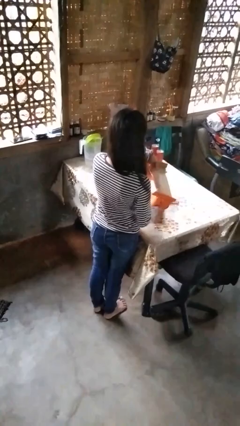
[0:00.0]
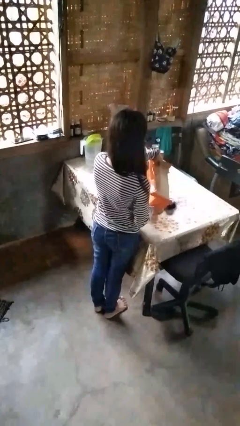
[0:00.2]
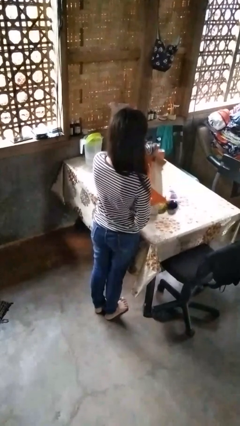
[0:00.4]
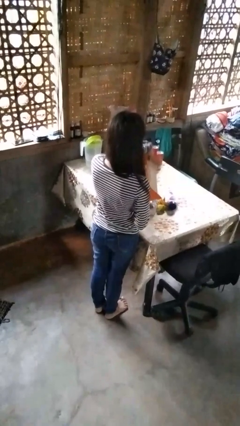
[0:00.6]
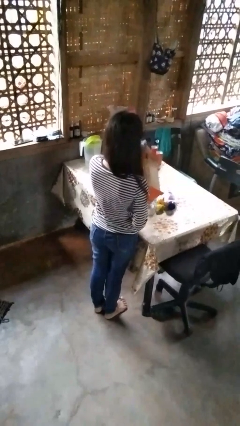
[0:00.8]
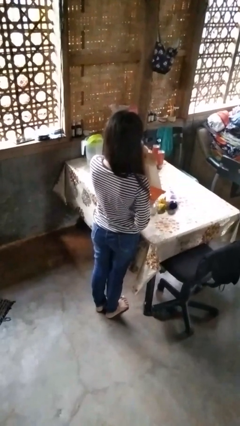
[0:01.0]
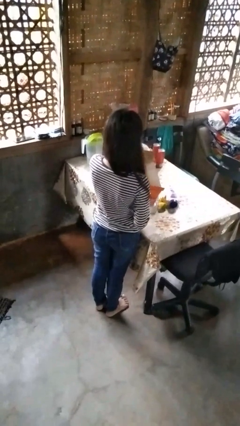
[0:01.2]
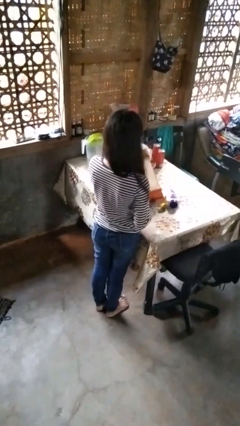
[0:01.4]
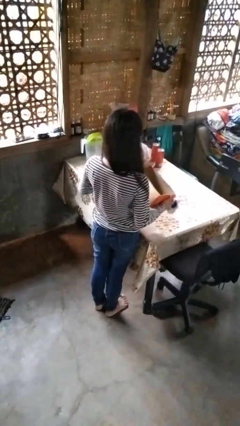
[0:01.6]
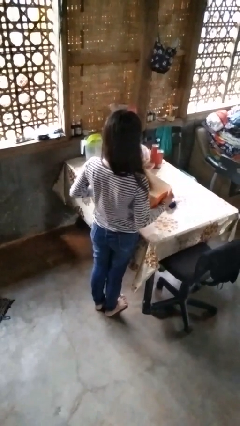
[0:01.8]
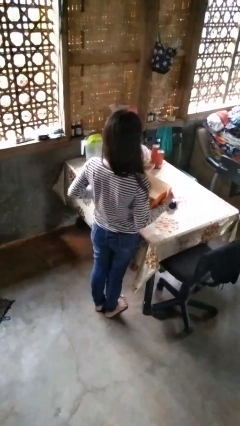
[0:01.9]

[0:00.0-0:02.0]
person unloads box onto table

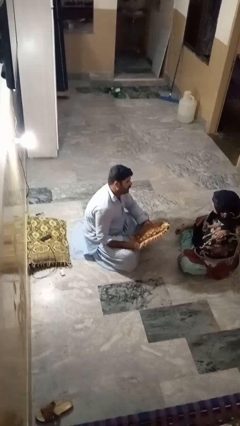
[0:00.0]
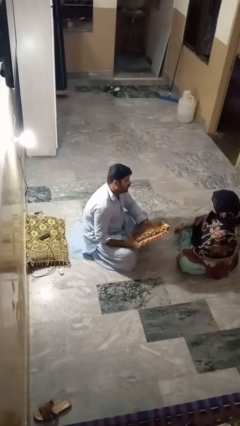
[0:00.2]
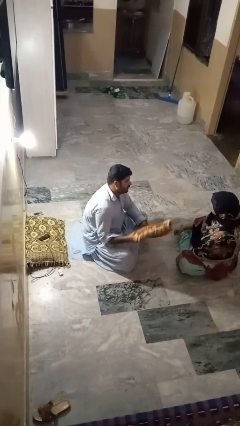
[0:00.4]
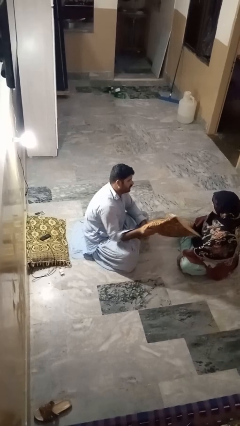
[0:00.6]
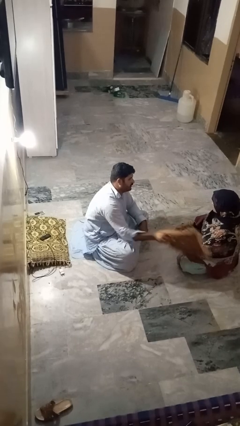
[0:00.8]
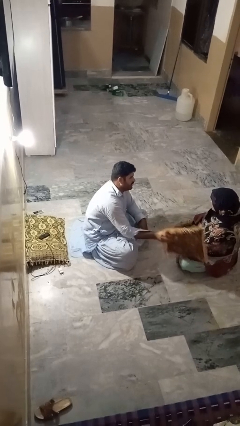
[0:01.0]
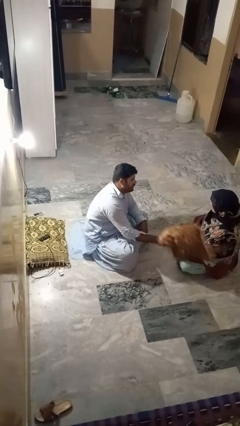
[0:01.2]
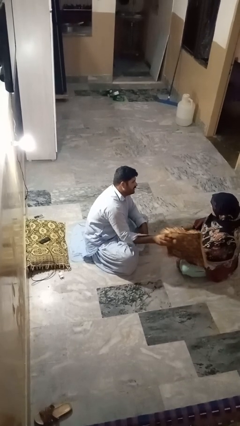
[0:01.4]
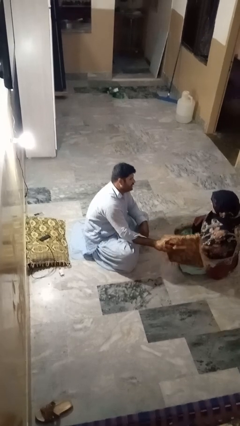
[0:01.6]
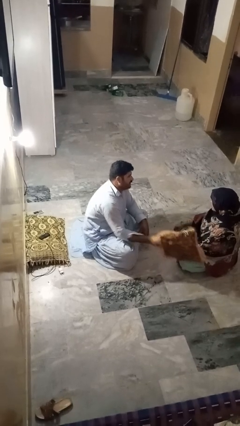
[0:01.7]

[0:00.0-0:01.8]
person hits person with pillow

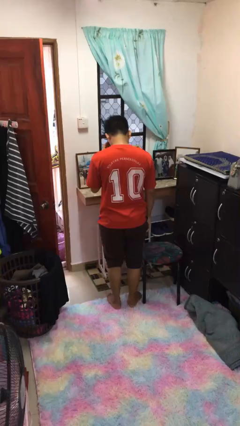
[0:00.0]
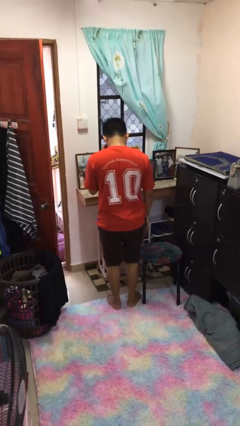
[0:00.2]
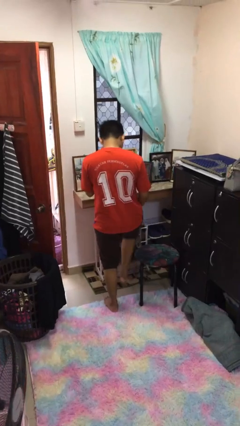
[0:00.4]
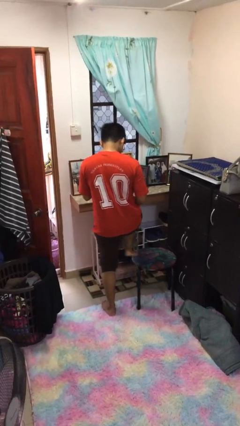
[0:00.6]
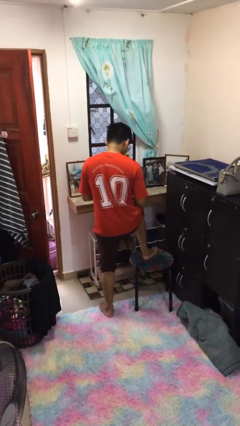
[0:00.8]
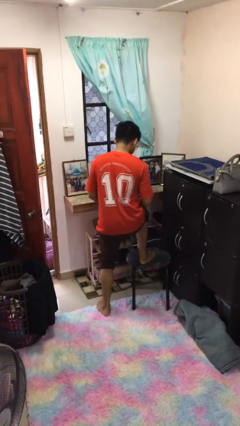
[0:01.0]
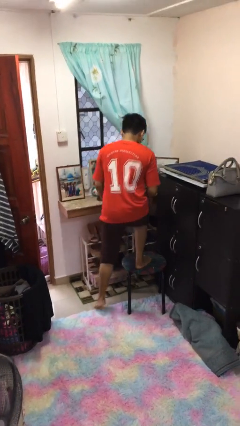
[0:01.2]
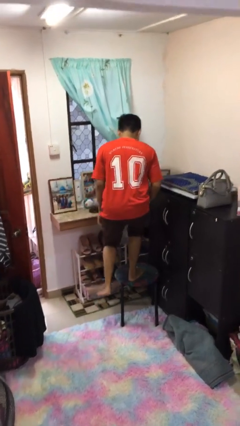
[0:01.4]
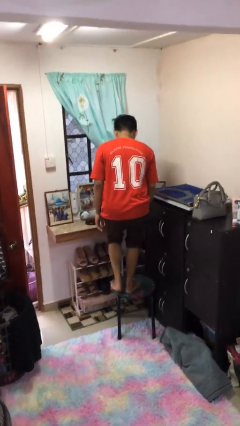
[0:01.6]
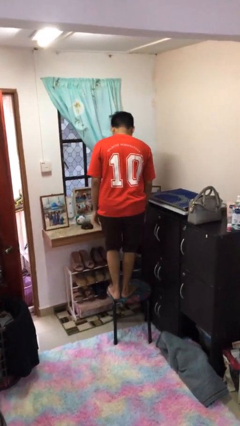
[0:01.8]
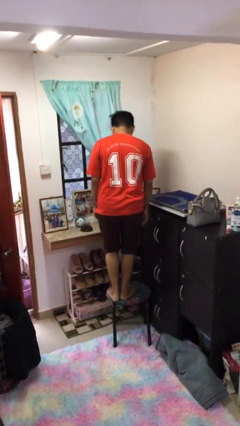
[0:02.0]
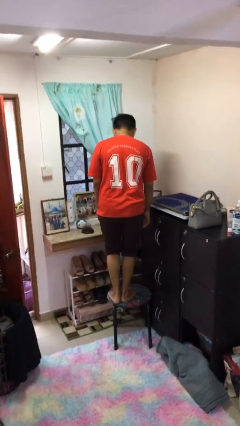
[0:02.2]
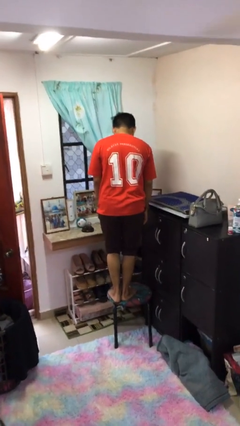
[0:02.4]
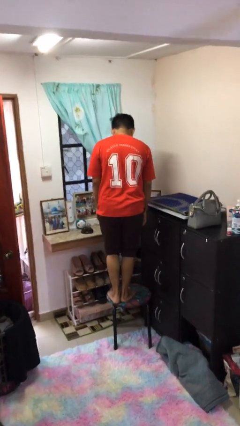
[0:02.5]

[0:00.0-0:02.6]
person climbs on chair

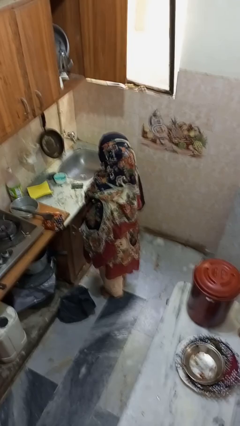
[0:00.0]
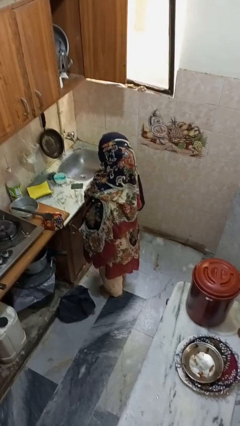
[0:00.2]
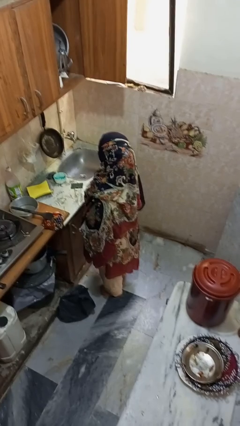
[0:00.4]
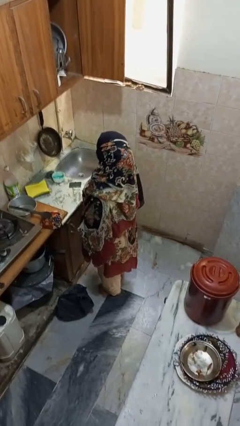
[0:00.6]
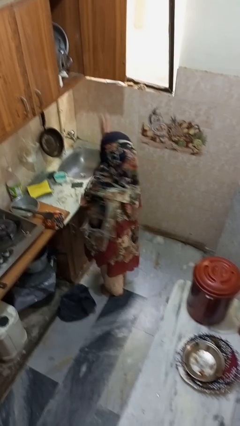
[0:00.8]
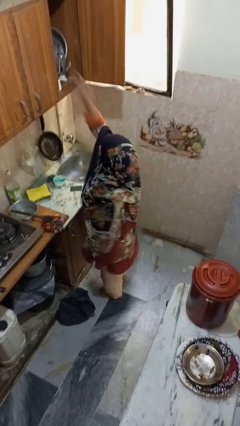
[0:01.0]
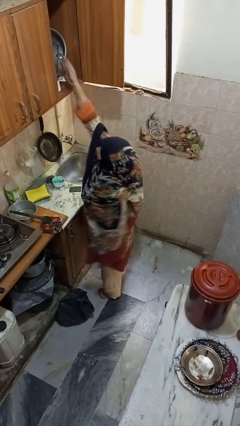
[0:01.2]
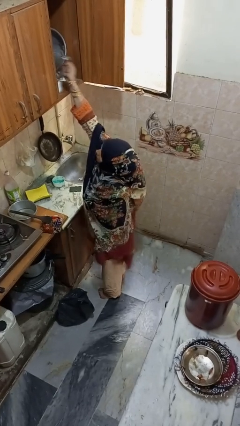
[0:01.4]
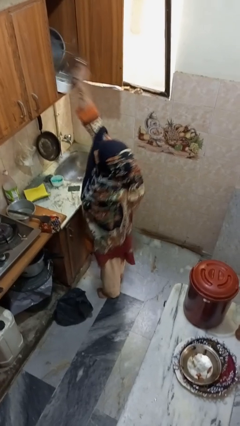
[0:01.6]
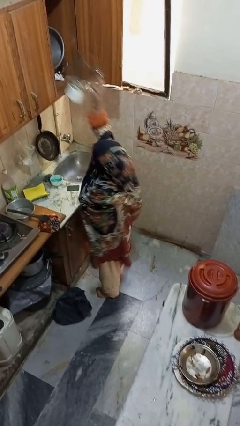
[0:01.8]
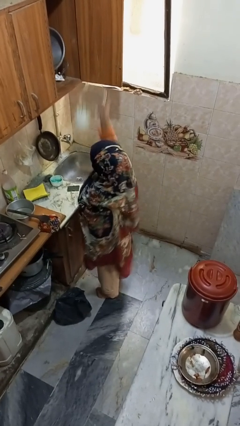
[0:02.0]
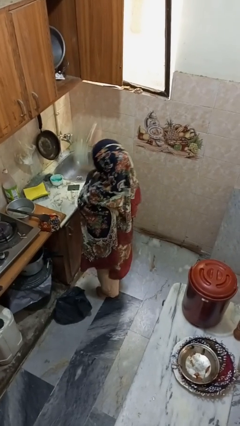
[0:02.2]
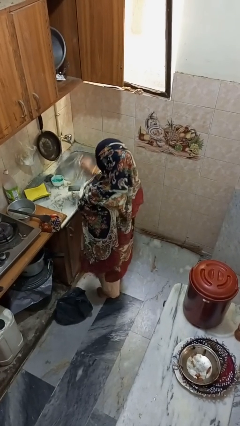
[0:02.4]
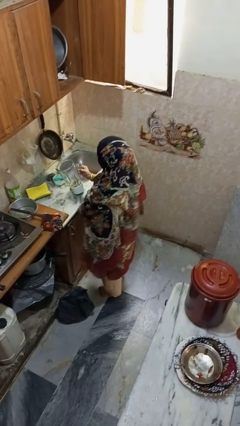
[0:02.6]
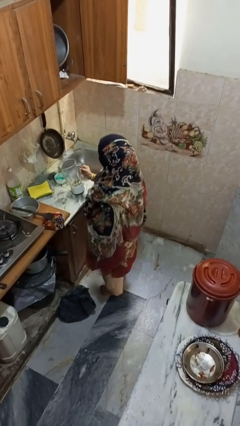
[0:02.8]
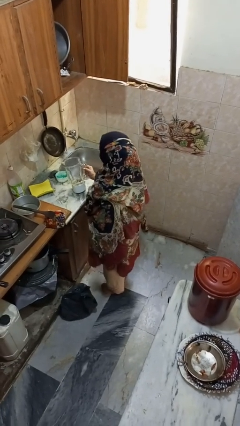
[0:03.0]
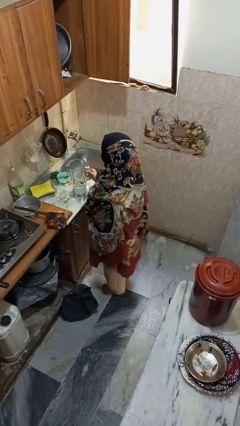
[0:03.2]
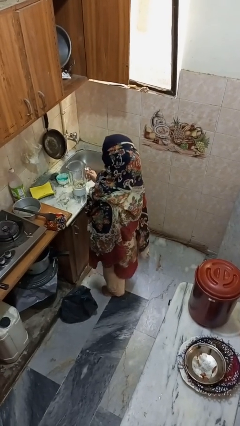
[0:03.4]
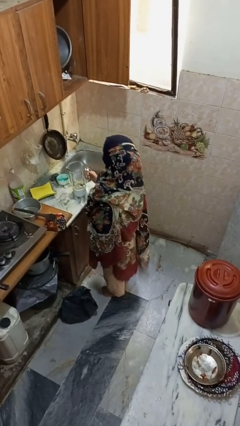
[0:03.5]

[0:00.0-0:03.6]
person puts object in cabinet

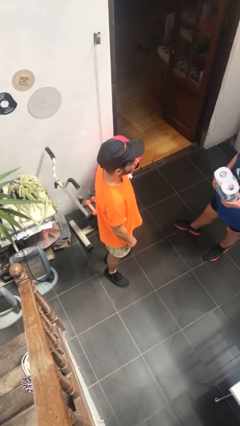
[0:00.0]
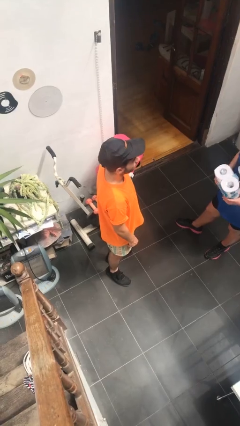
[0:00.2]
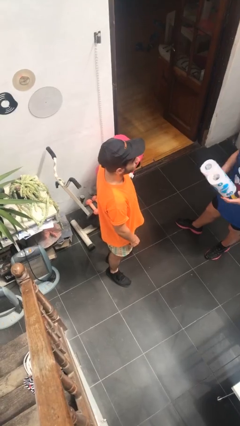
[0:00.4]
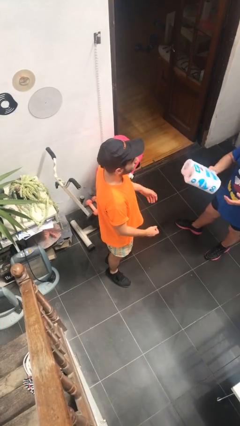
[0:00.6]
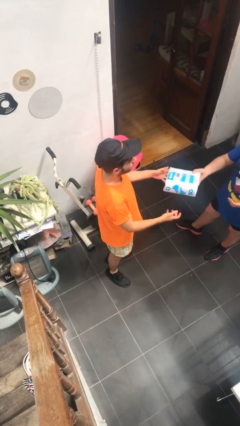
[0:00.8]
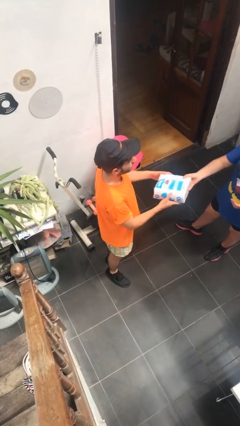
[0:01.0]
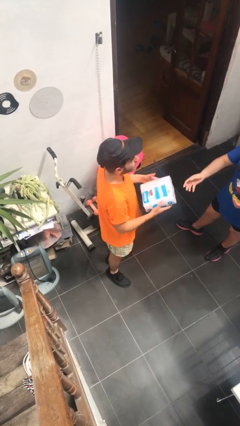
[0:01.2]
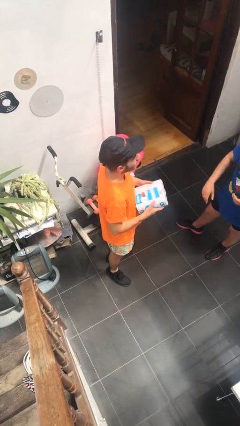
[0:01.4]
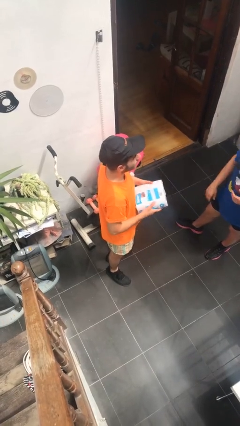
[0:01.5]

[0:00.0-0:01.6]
person transfers object to person

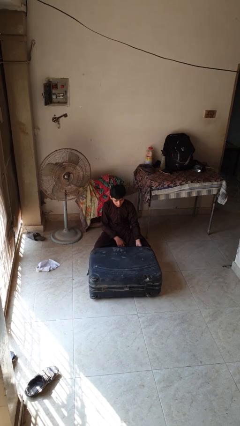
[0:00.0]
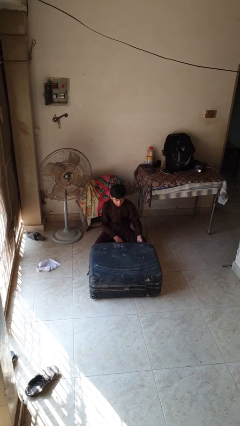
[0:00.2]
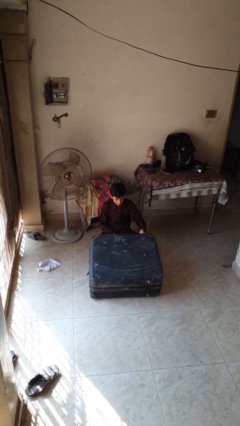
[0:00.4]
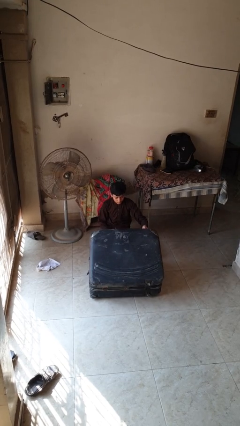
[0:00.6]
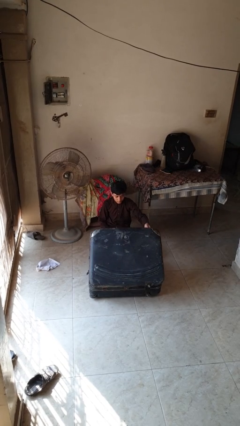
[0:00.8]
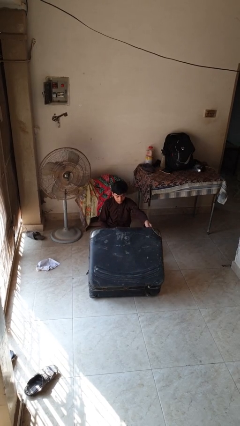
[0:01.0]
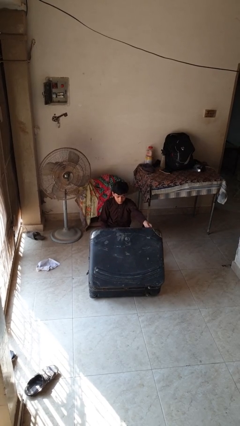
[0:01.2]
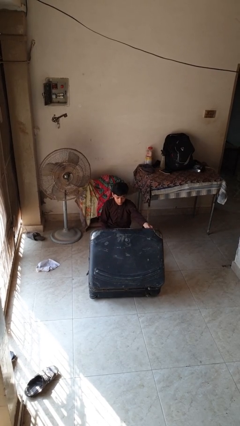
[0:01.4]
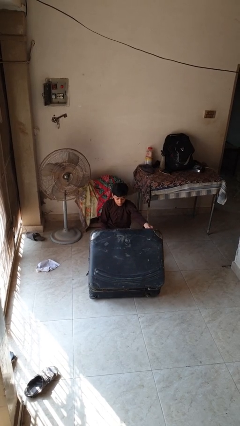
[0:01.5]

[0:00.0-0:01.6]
person opens suitcase

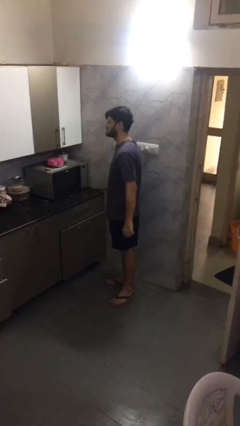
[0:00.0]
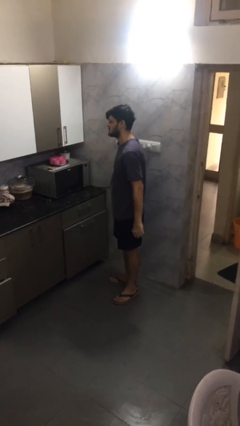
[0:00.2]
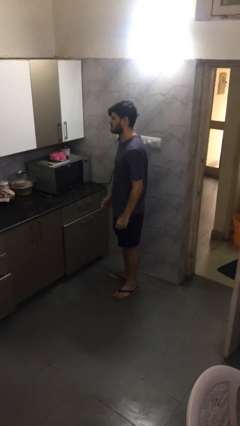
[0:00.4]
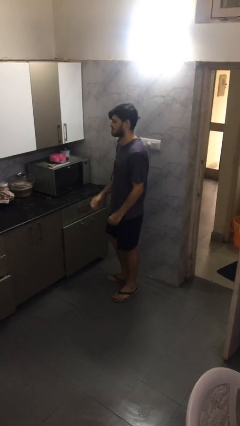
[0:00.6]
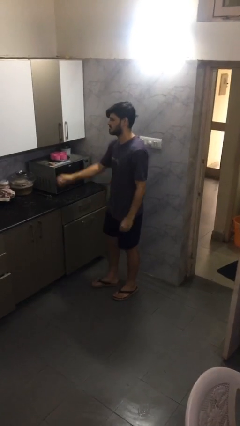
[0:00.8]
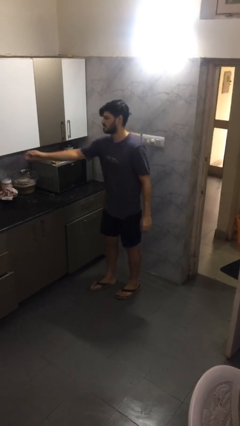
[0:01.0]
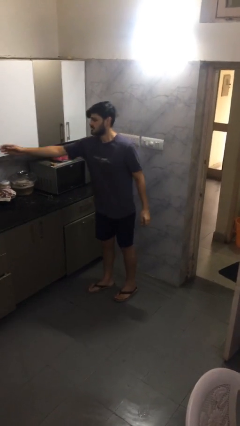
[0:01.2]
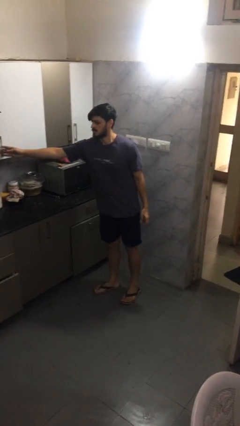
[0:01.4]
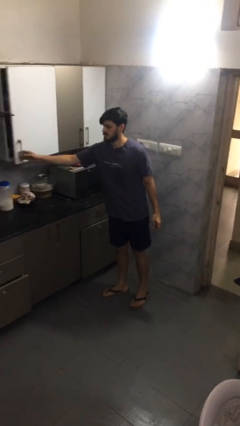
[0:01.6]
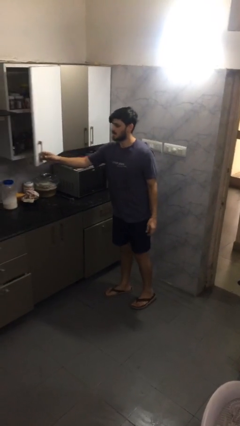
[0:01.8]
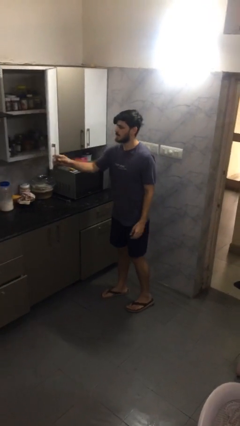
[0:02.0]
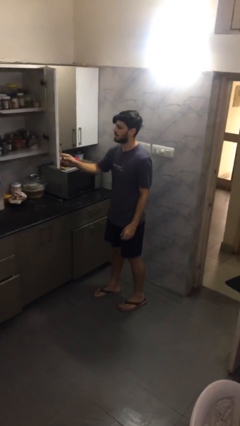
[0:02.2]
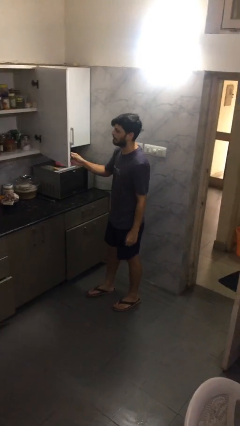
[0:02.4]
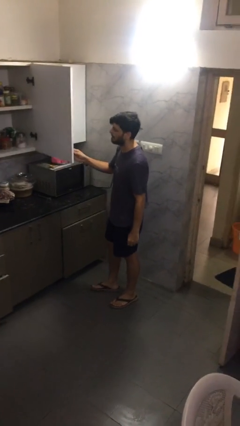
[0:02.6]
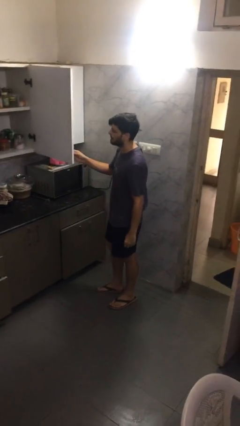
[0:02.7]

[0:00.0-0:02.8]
person opens cabinet

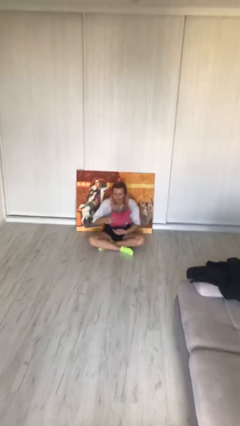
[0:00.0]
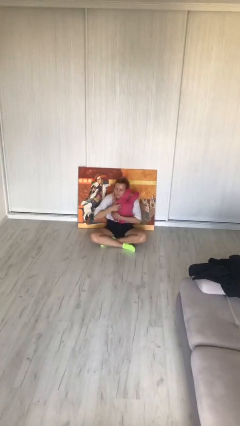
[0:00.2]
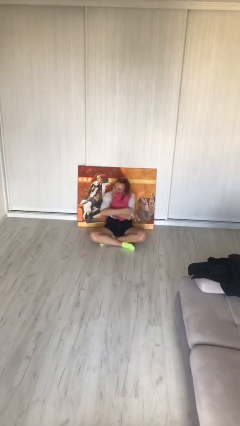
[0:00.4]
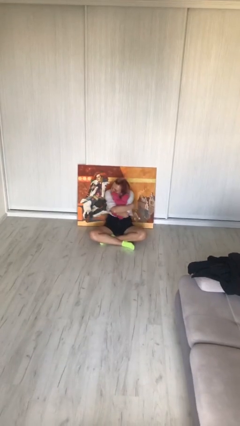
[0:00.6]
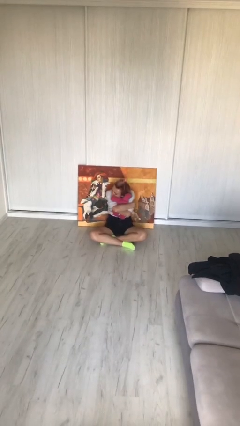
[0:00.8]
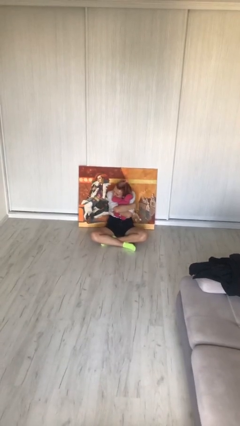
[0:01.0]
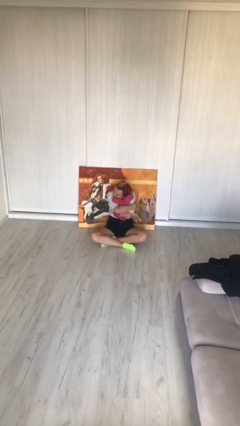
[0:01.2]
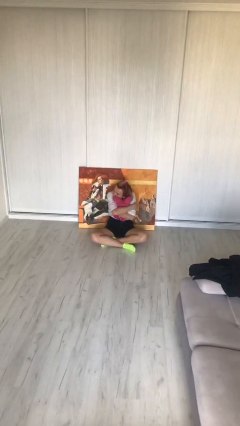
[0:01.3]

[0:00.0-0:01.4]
person hugs stuffed animal
